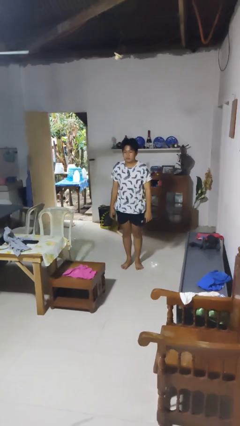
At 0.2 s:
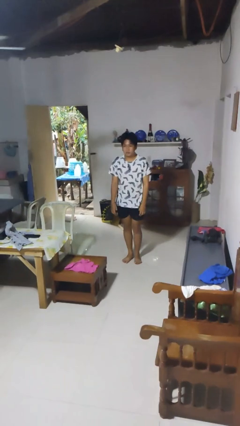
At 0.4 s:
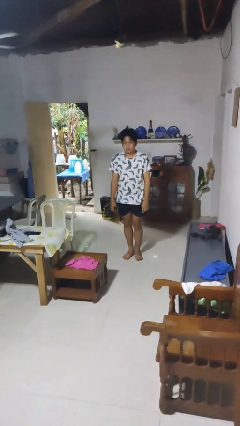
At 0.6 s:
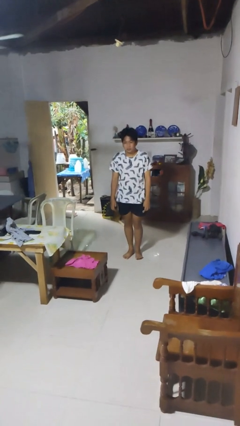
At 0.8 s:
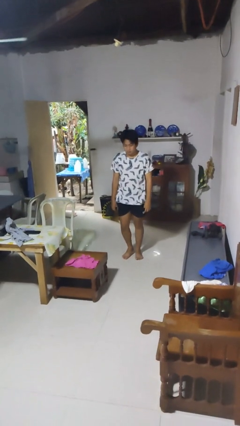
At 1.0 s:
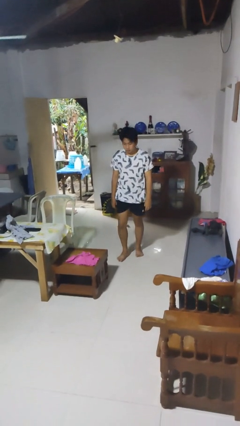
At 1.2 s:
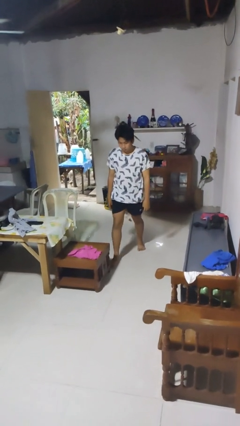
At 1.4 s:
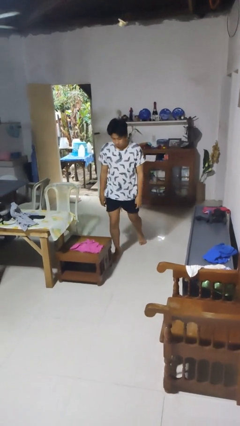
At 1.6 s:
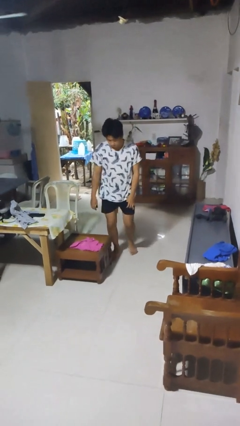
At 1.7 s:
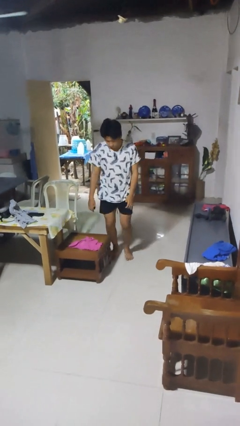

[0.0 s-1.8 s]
person trips on object on floor

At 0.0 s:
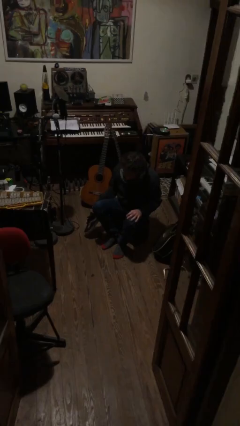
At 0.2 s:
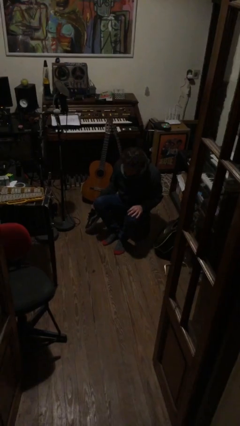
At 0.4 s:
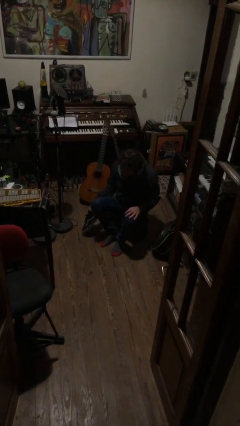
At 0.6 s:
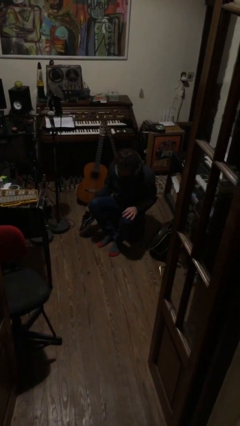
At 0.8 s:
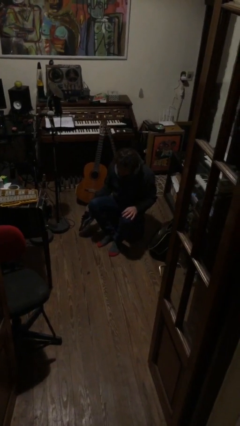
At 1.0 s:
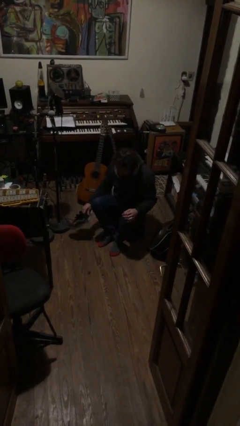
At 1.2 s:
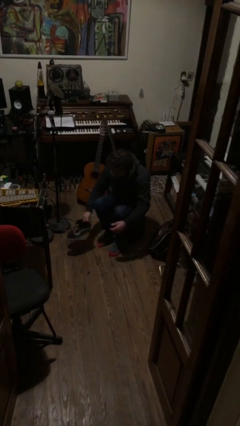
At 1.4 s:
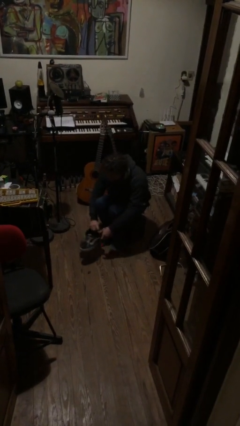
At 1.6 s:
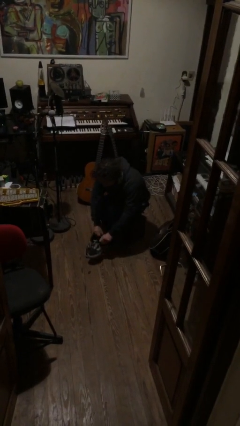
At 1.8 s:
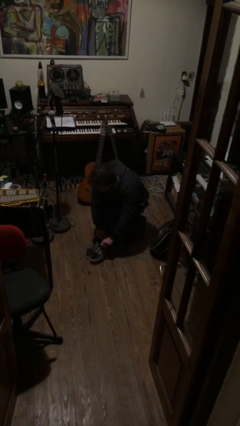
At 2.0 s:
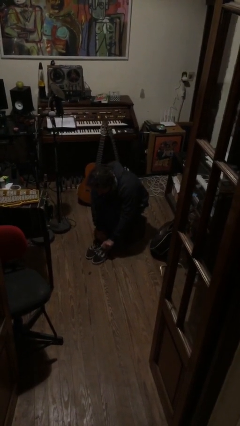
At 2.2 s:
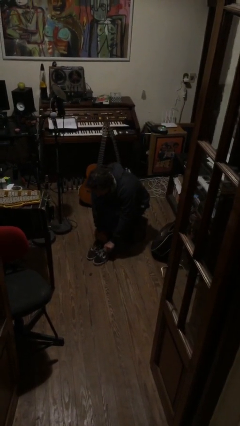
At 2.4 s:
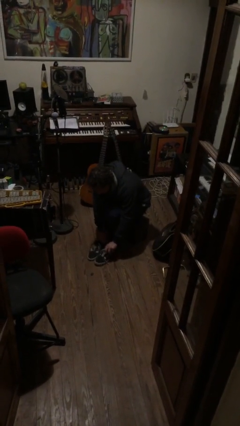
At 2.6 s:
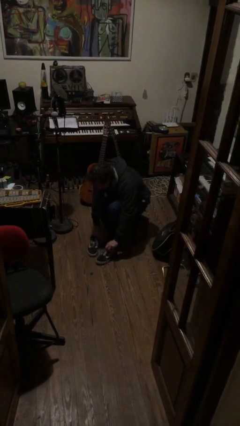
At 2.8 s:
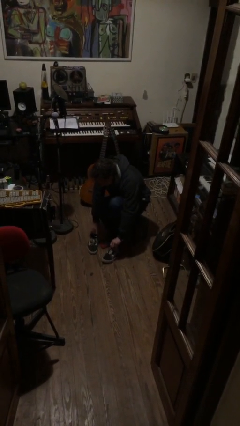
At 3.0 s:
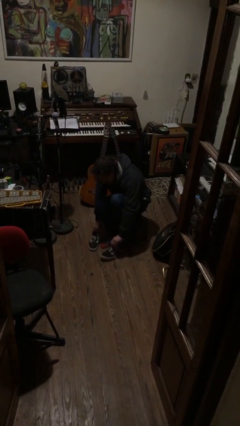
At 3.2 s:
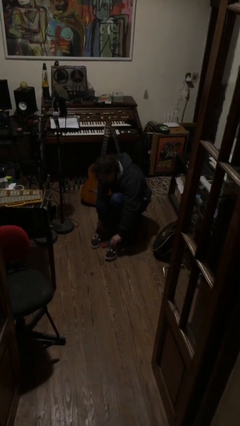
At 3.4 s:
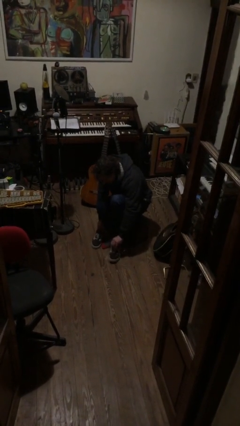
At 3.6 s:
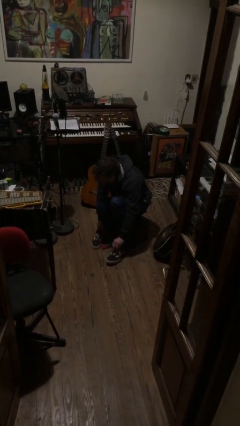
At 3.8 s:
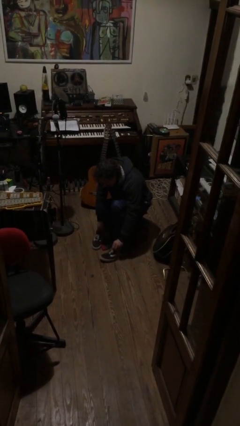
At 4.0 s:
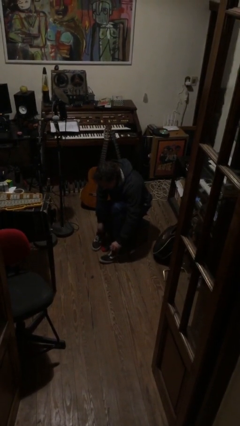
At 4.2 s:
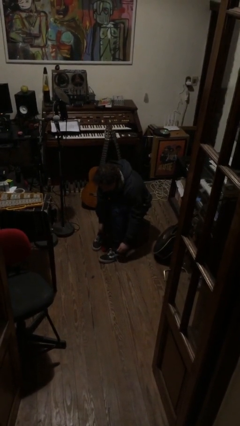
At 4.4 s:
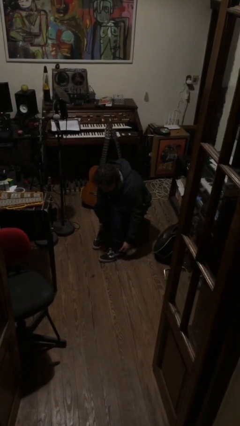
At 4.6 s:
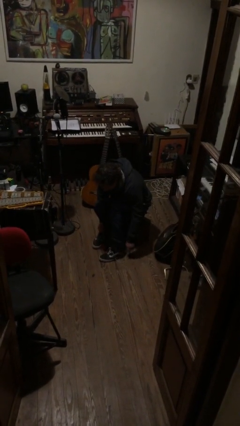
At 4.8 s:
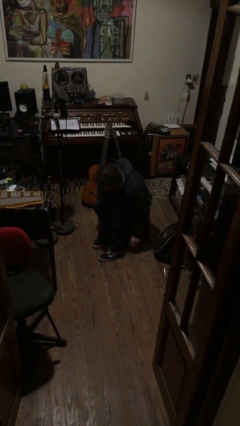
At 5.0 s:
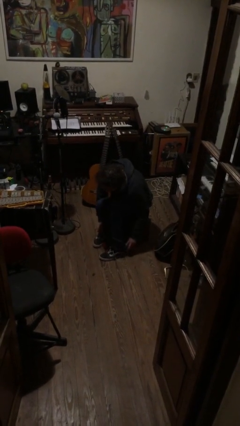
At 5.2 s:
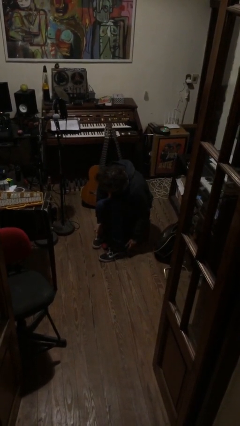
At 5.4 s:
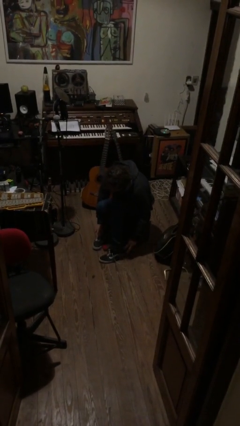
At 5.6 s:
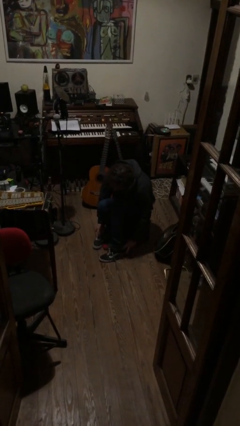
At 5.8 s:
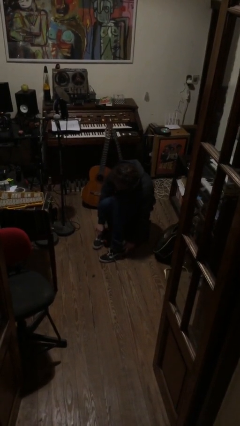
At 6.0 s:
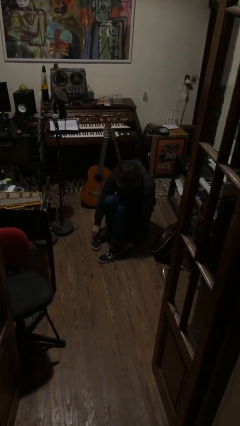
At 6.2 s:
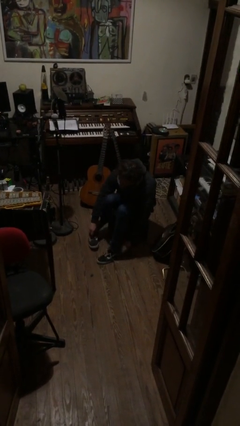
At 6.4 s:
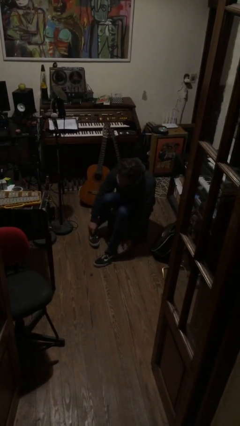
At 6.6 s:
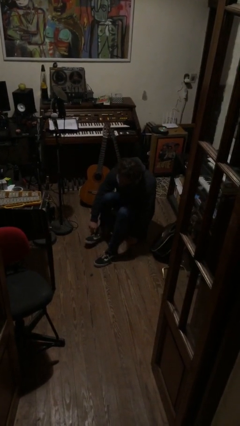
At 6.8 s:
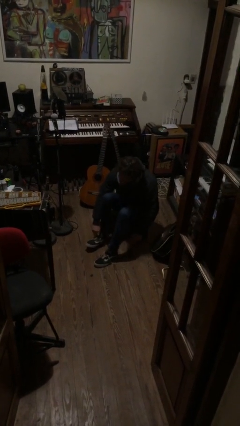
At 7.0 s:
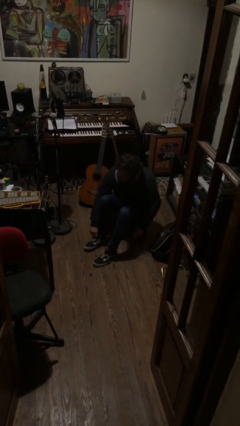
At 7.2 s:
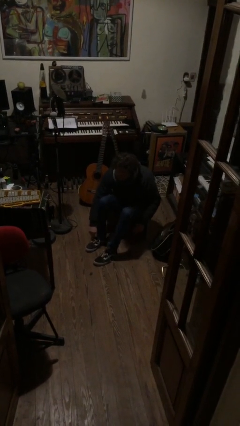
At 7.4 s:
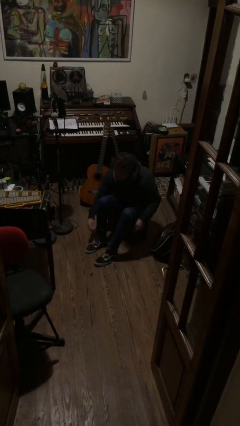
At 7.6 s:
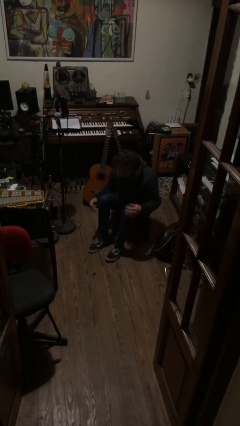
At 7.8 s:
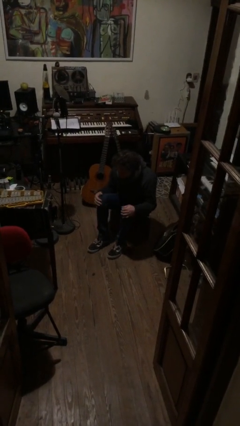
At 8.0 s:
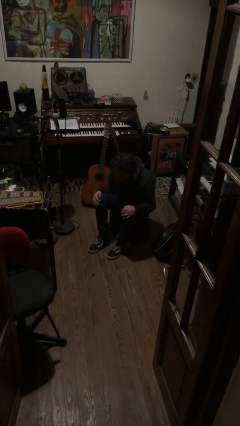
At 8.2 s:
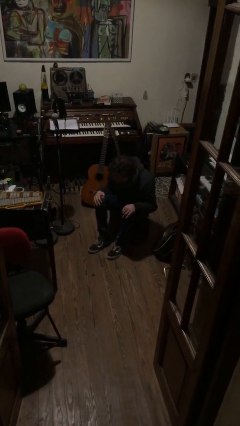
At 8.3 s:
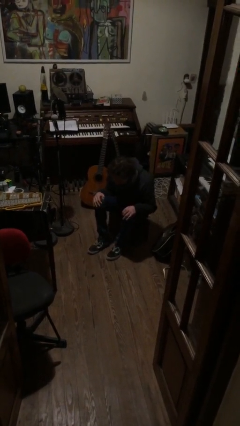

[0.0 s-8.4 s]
person puts on shoes

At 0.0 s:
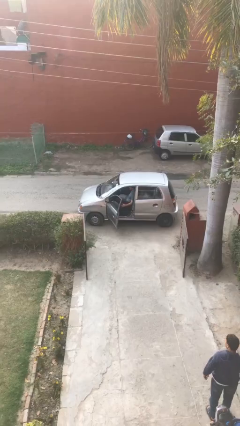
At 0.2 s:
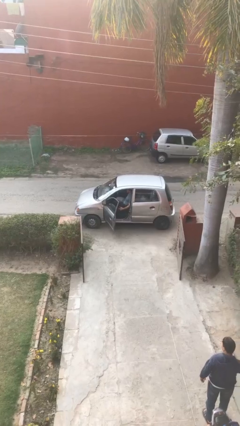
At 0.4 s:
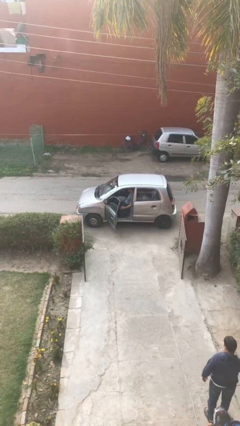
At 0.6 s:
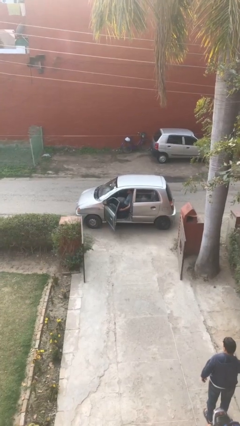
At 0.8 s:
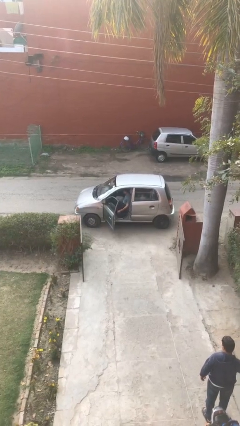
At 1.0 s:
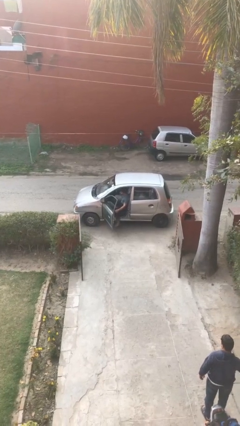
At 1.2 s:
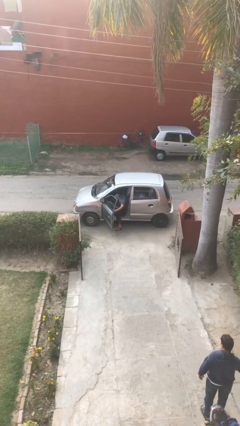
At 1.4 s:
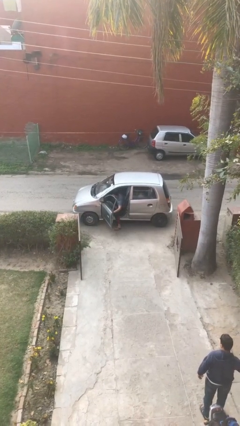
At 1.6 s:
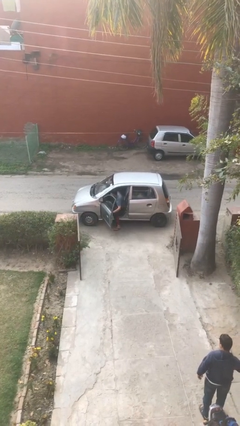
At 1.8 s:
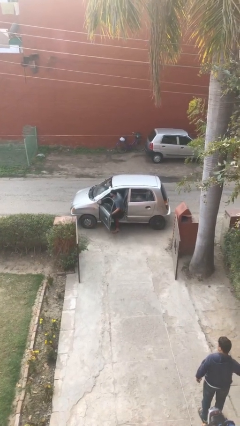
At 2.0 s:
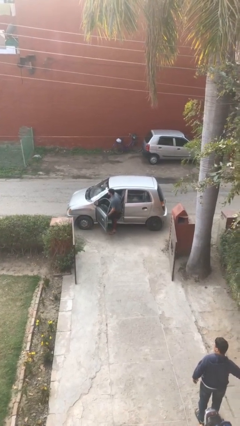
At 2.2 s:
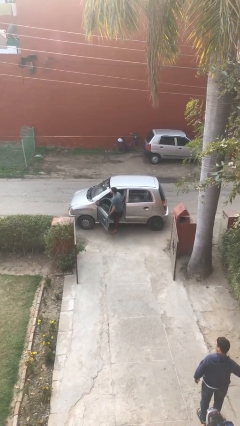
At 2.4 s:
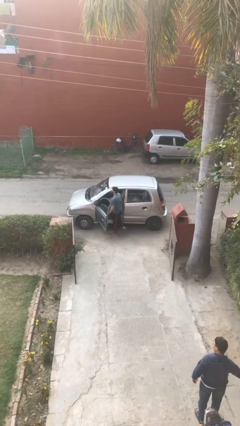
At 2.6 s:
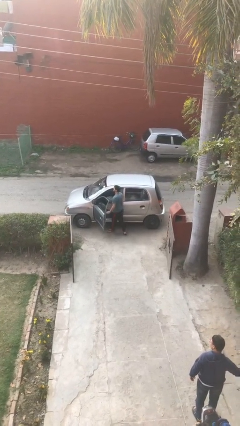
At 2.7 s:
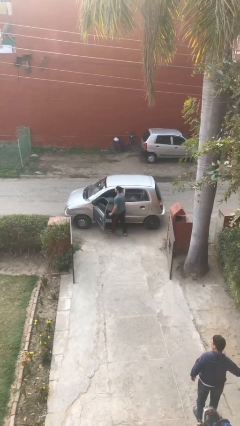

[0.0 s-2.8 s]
person exits car

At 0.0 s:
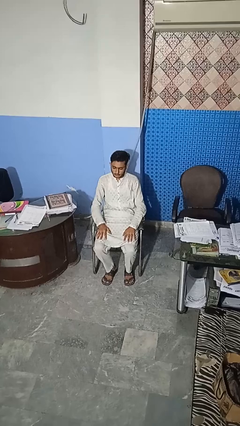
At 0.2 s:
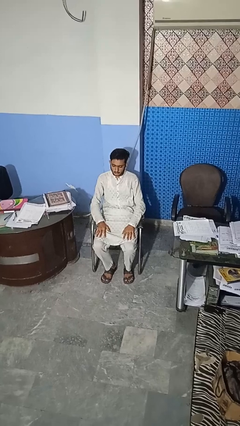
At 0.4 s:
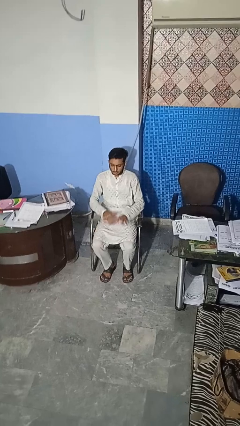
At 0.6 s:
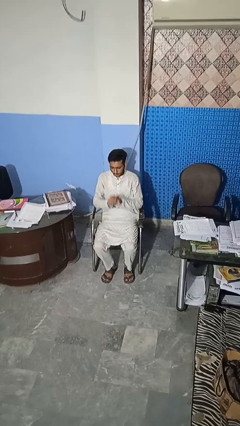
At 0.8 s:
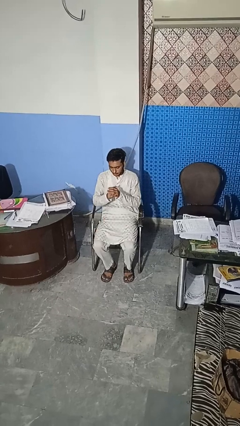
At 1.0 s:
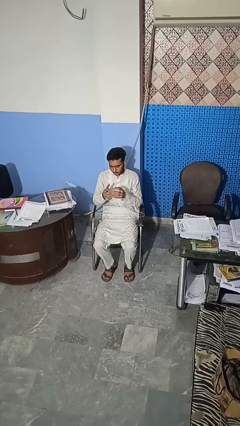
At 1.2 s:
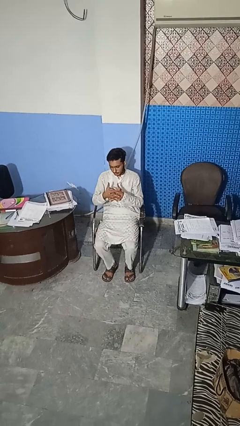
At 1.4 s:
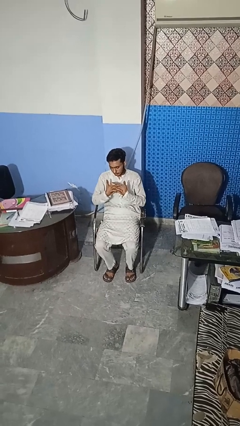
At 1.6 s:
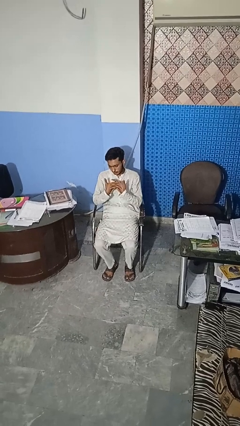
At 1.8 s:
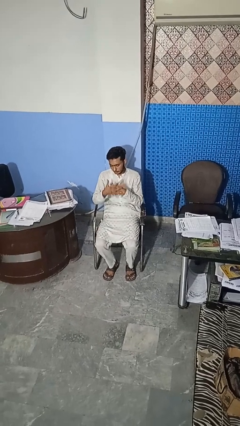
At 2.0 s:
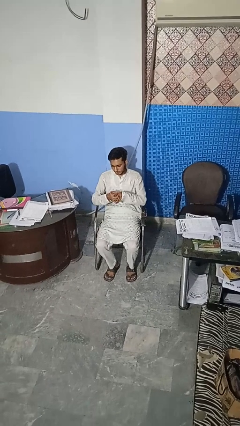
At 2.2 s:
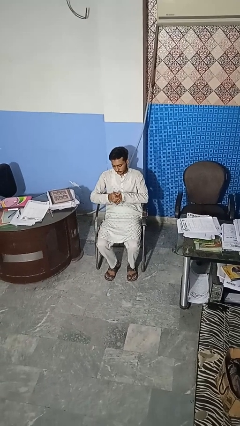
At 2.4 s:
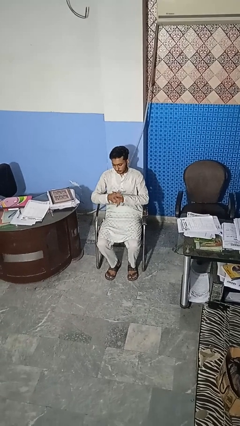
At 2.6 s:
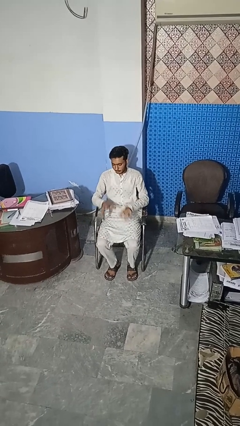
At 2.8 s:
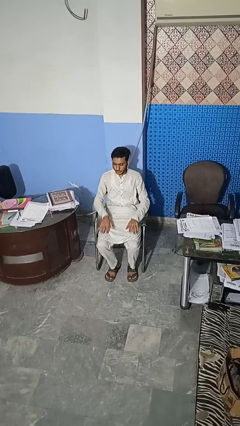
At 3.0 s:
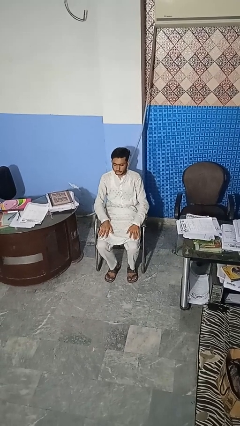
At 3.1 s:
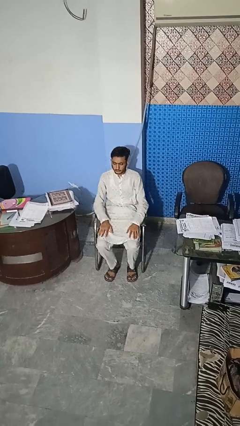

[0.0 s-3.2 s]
person cracks knuckles

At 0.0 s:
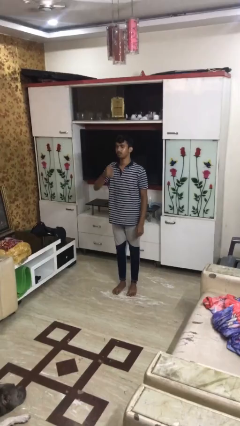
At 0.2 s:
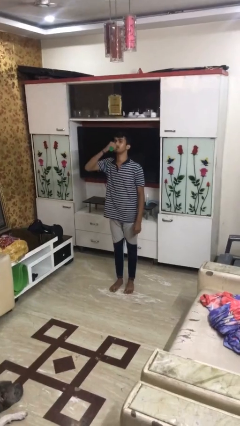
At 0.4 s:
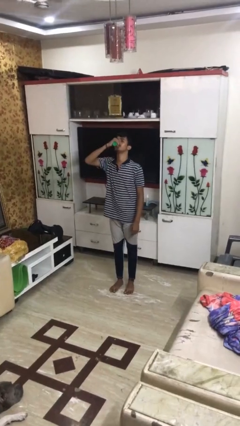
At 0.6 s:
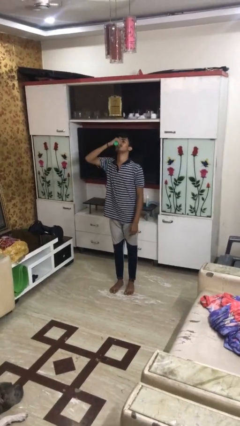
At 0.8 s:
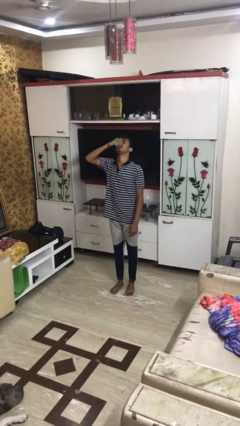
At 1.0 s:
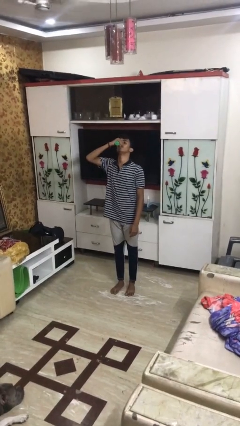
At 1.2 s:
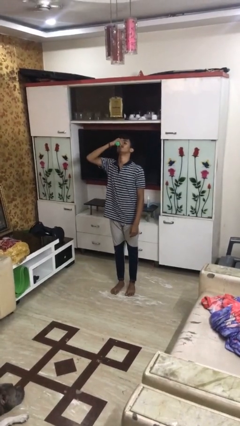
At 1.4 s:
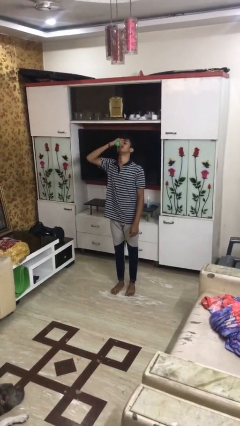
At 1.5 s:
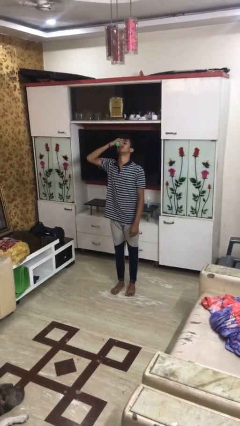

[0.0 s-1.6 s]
person drinks from beverage can
